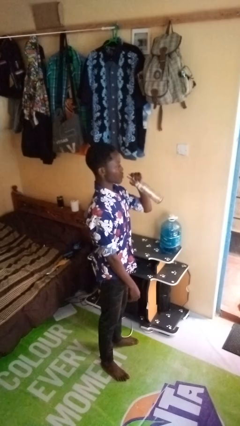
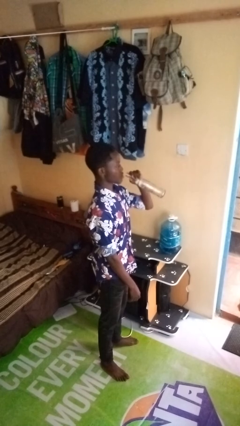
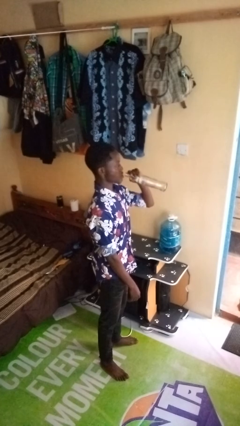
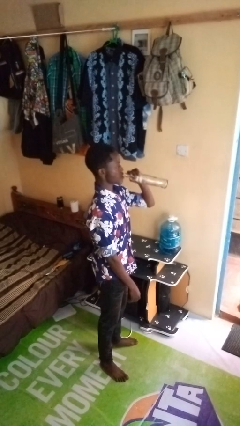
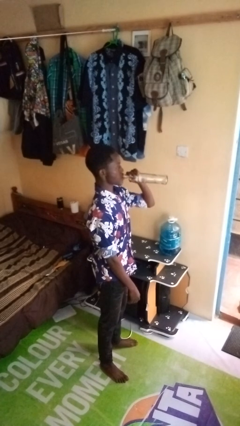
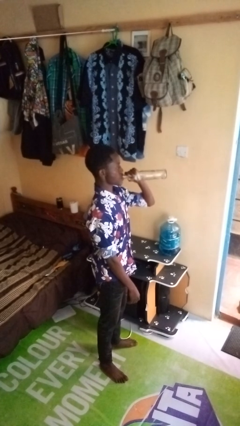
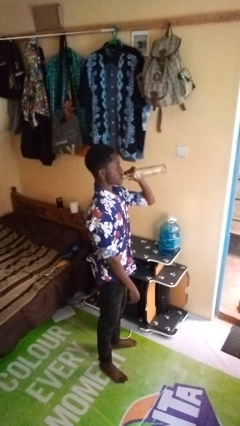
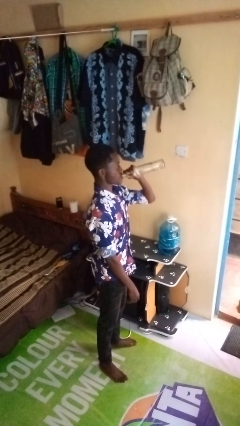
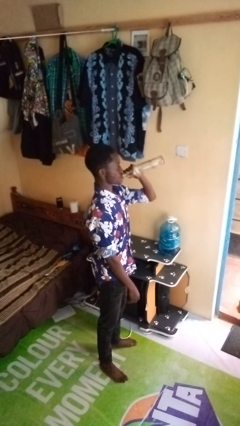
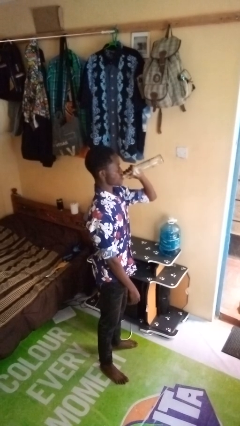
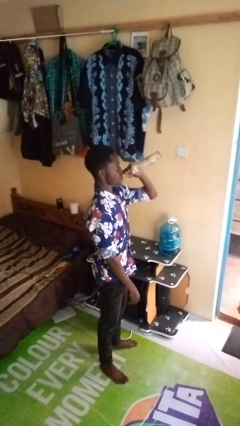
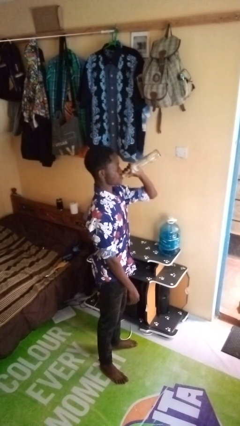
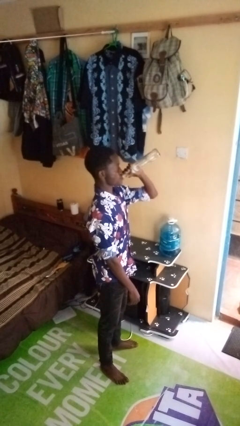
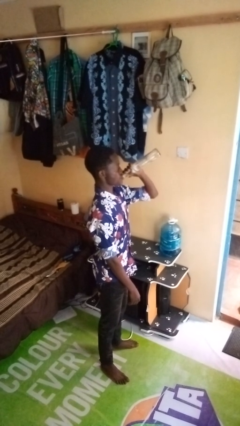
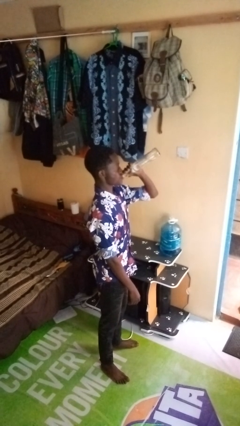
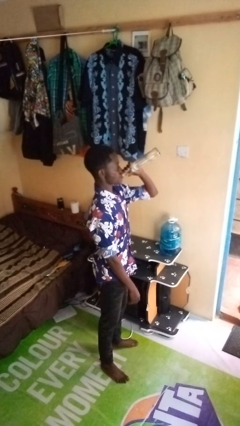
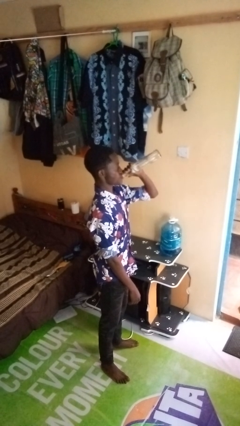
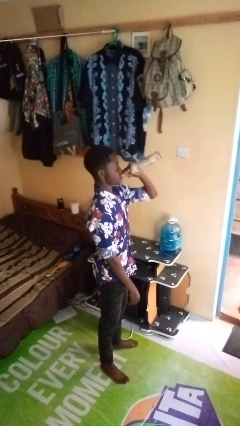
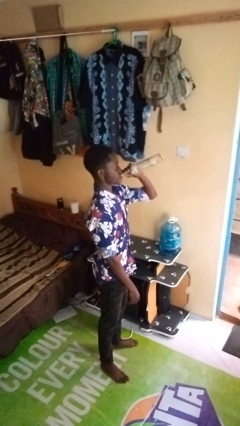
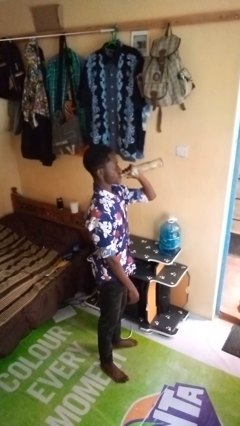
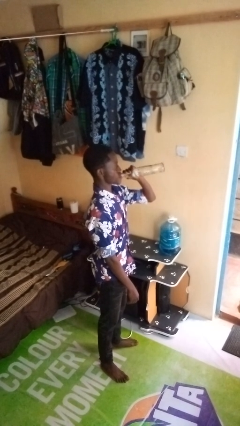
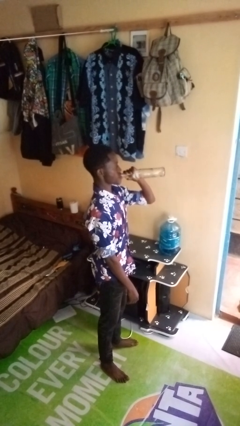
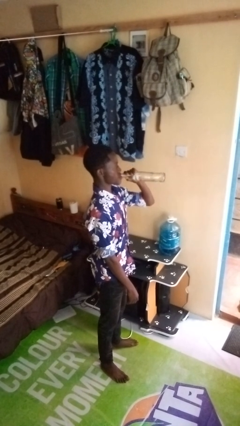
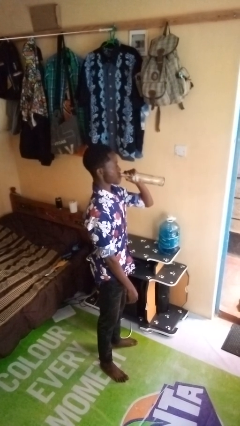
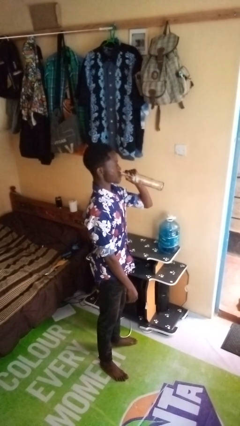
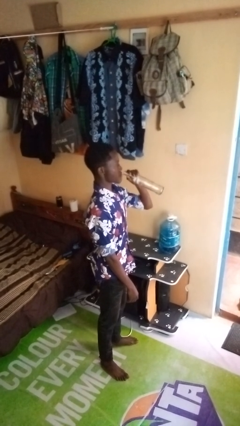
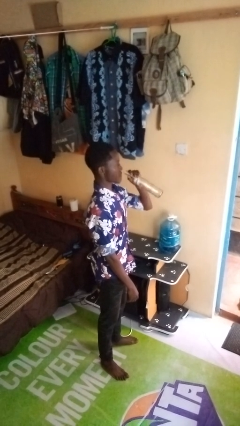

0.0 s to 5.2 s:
person drinks from bottle

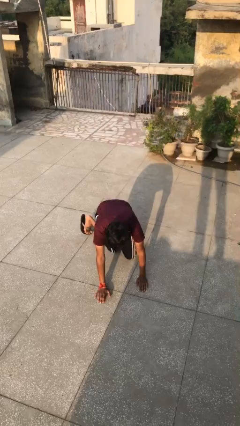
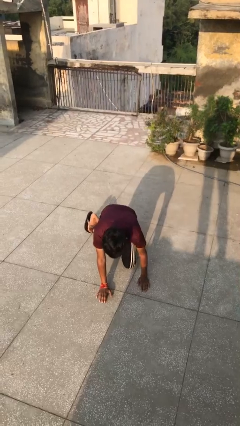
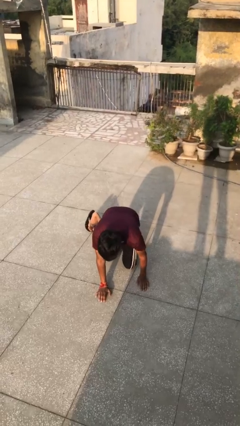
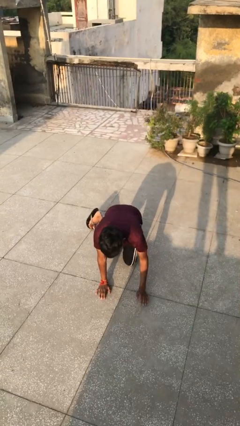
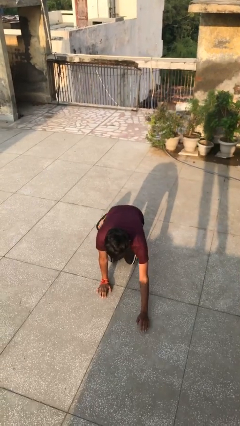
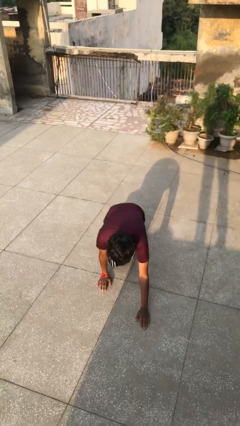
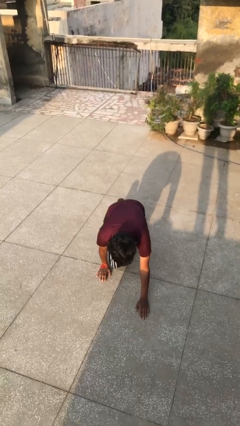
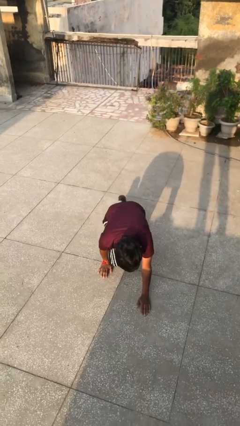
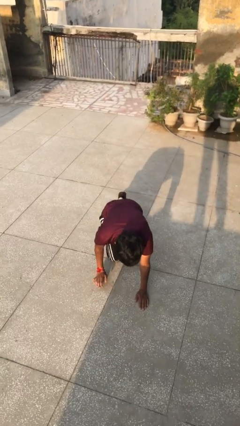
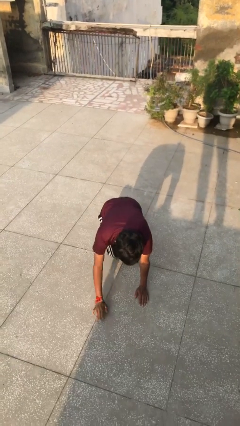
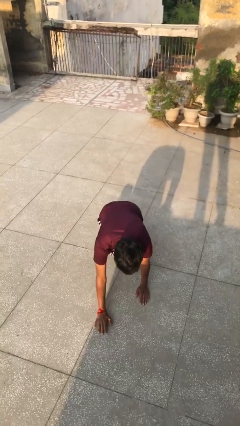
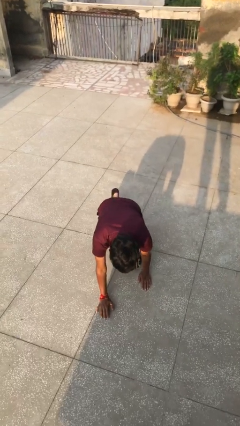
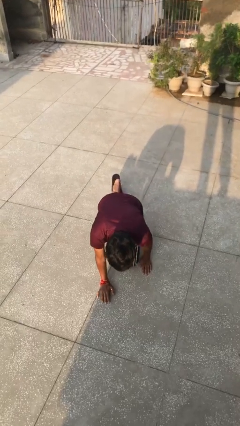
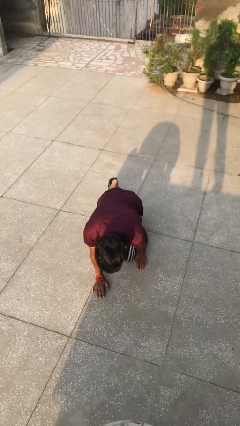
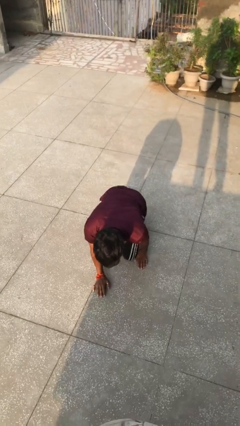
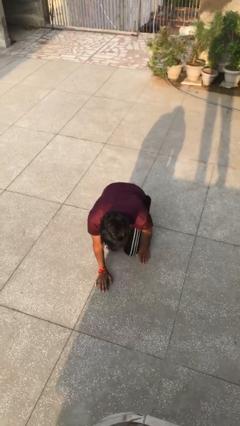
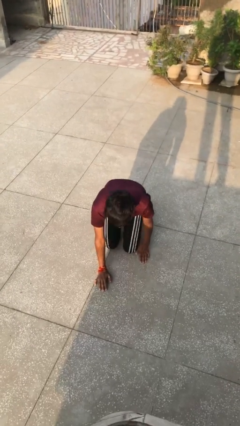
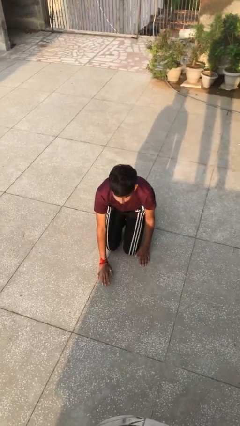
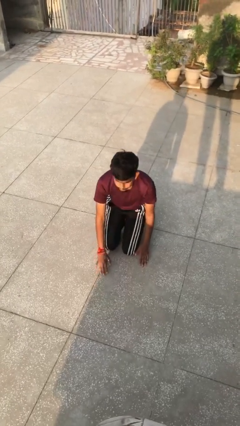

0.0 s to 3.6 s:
person crawls

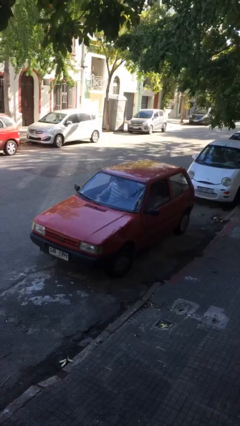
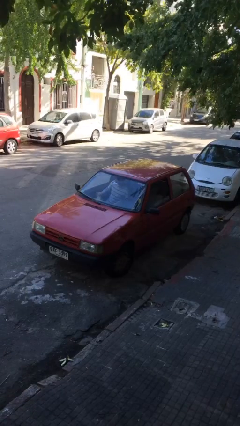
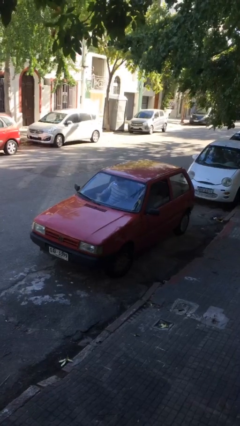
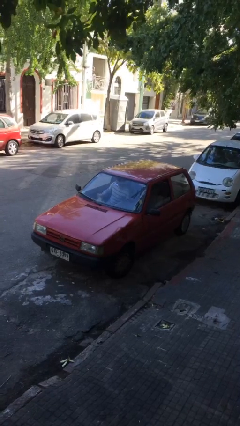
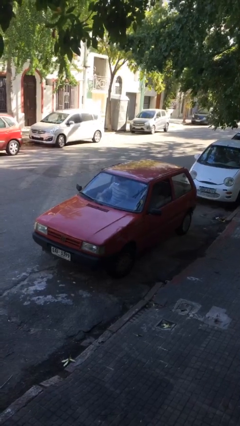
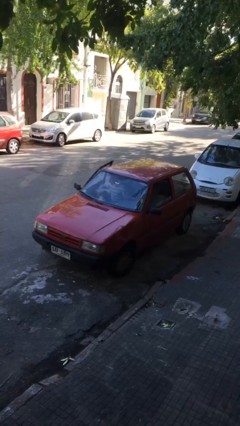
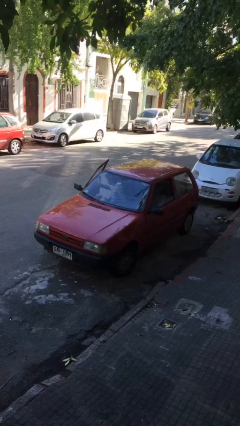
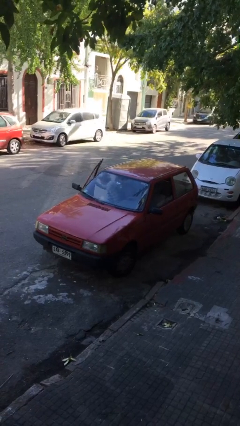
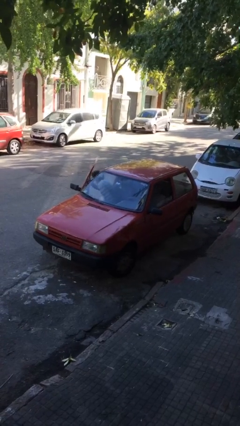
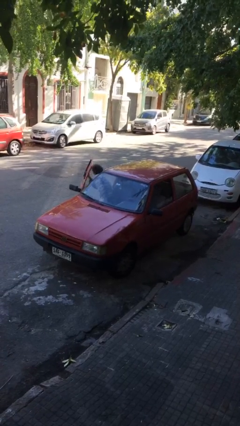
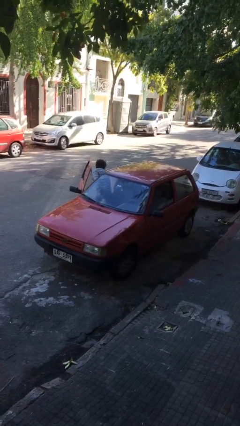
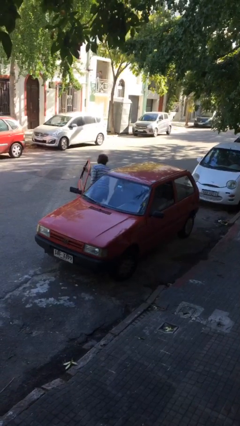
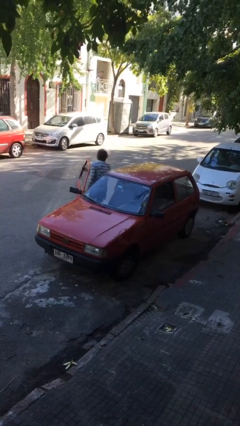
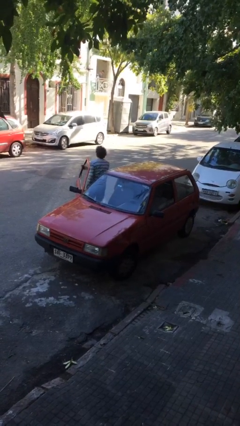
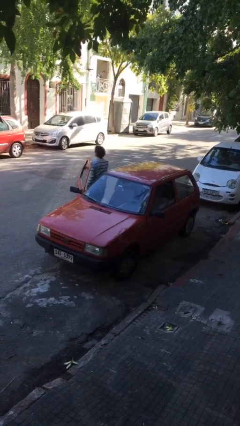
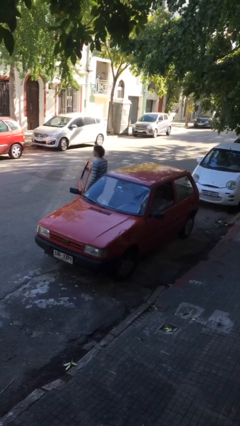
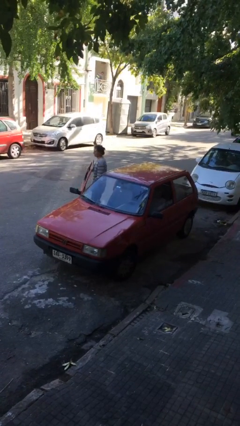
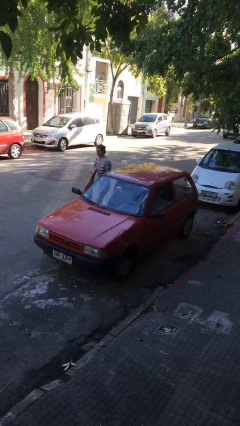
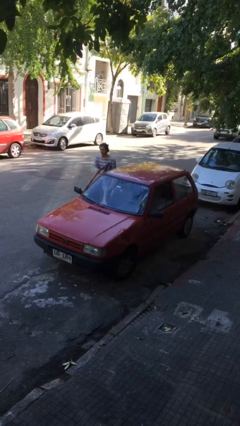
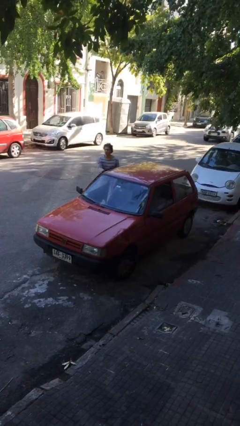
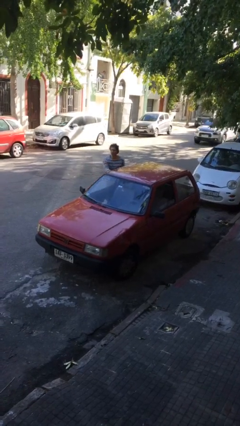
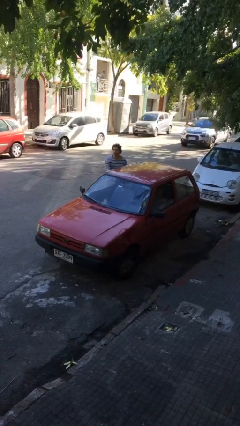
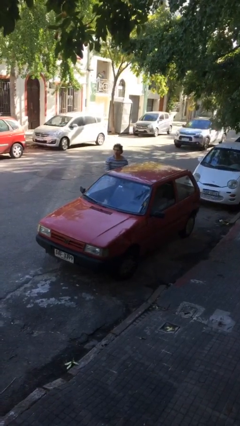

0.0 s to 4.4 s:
car drops off person

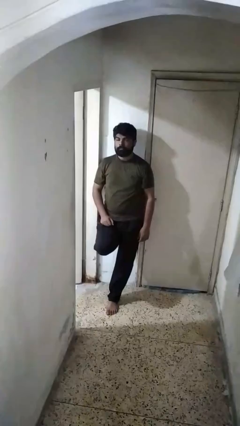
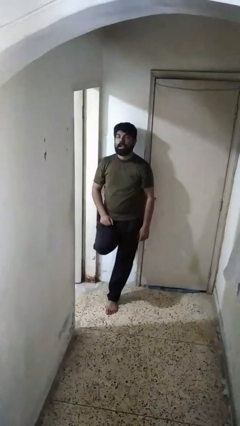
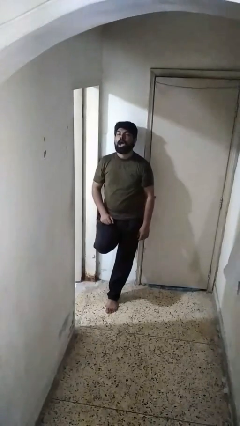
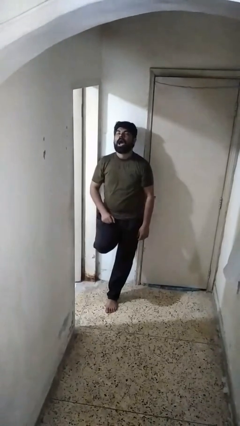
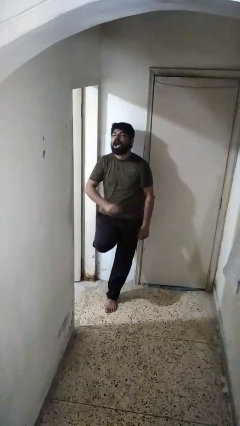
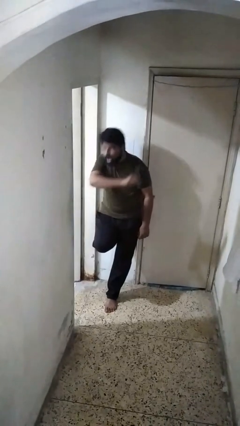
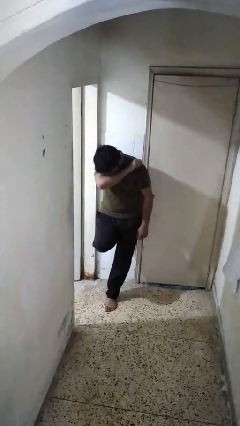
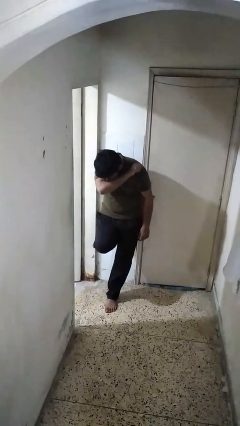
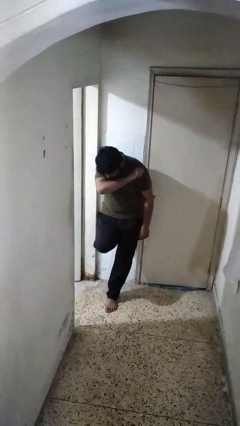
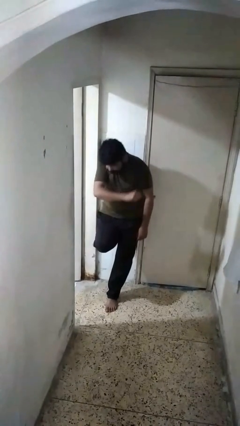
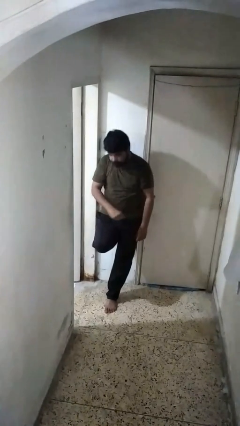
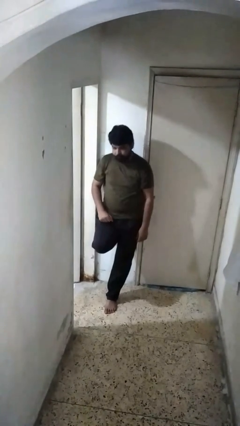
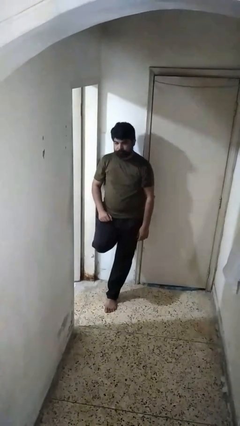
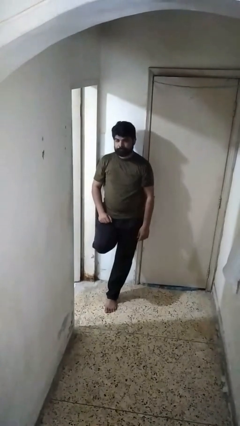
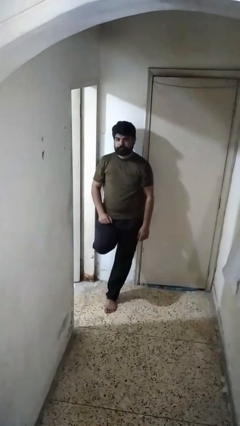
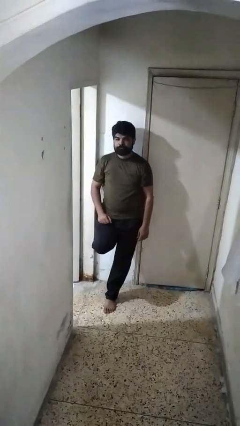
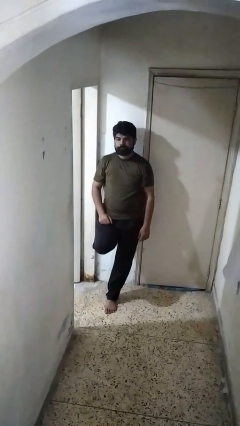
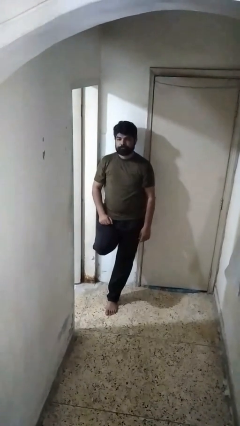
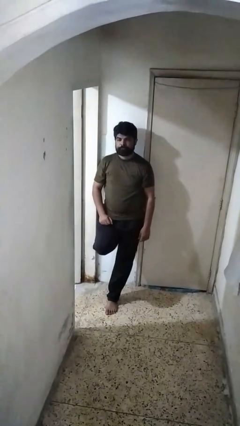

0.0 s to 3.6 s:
person sneezes into arm

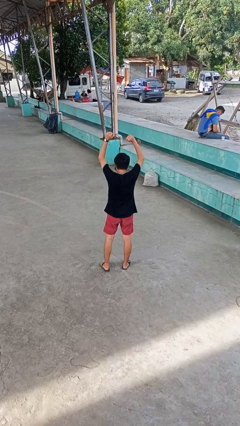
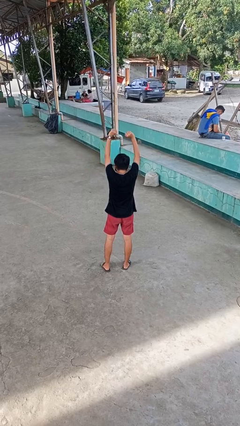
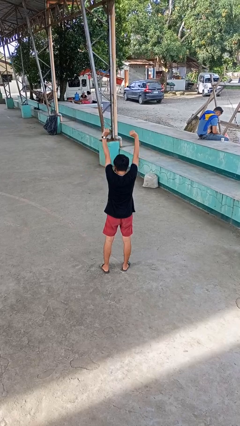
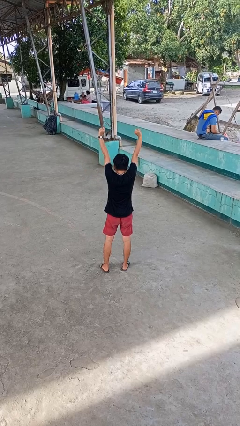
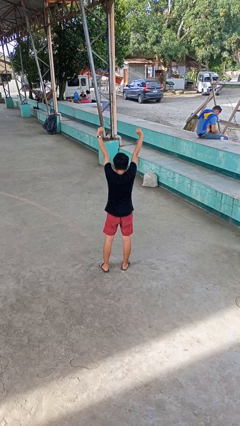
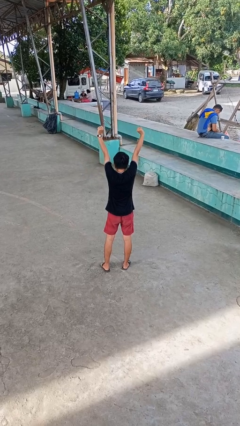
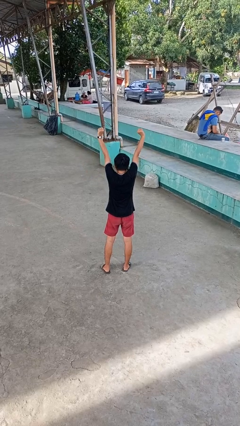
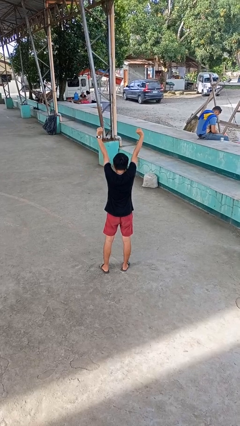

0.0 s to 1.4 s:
person stretches arms over head
